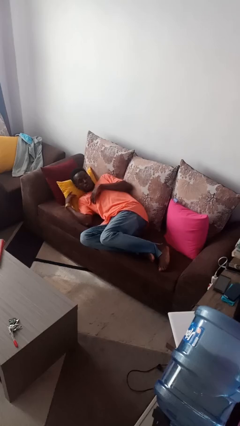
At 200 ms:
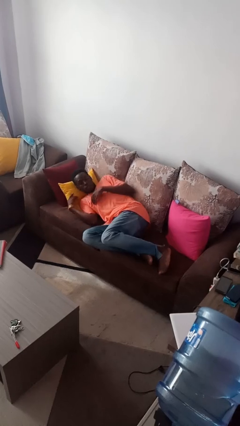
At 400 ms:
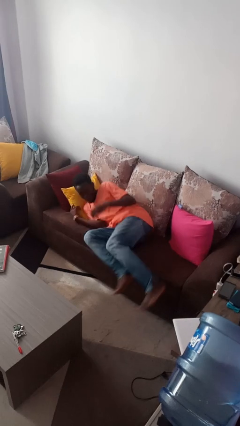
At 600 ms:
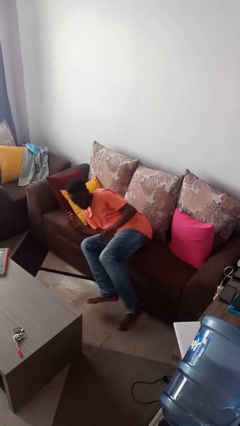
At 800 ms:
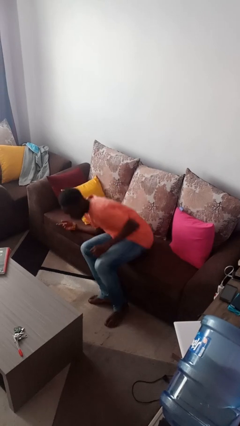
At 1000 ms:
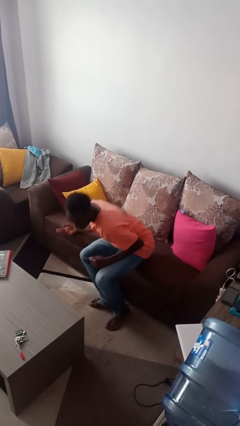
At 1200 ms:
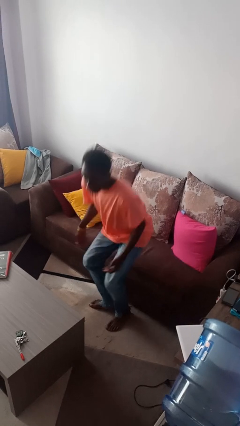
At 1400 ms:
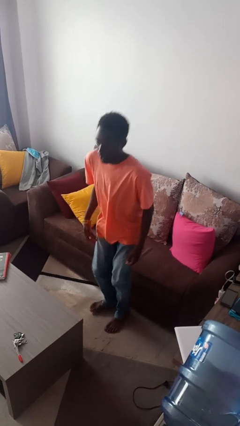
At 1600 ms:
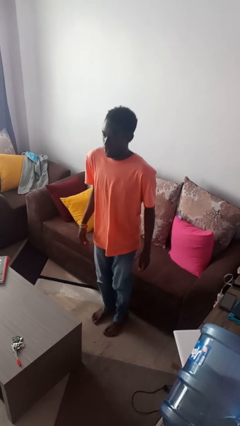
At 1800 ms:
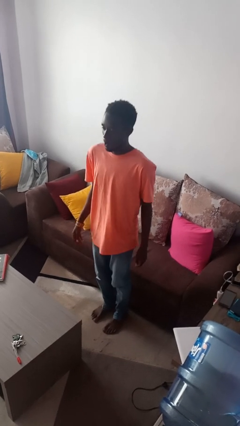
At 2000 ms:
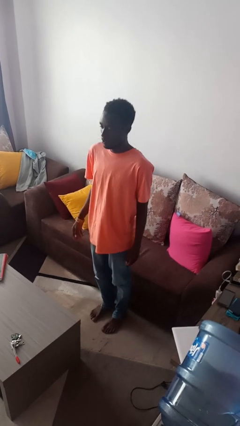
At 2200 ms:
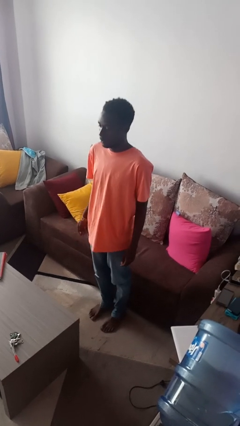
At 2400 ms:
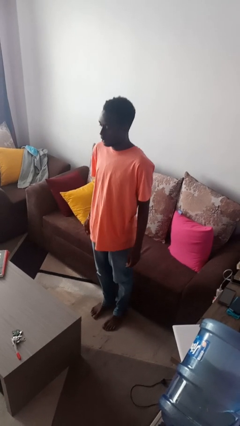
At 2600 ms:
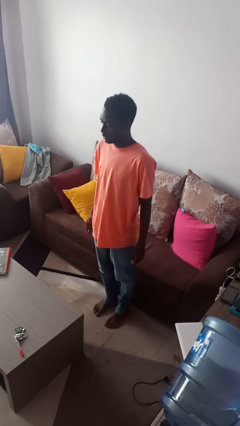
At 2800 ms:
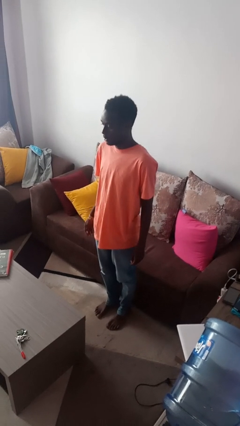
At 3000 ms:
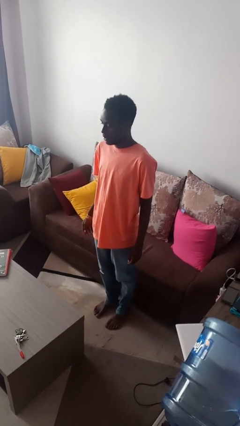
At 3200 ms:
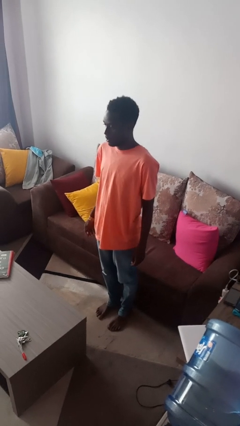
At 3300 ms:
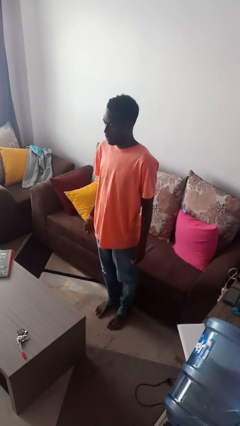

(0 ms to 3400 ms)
person stands up

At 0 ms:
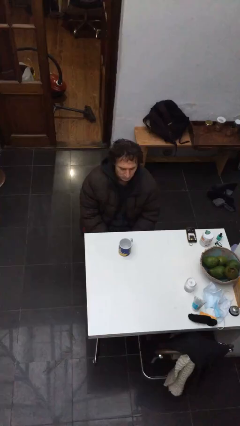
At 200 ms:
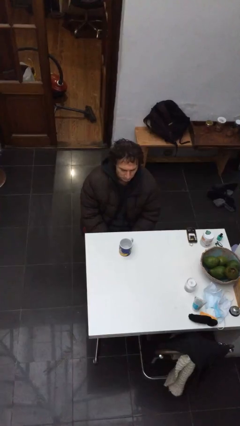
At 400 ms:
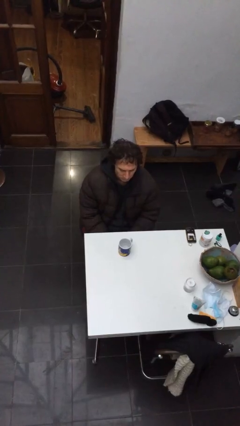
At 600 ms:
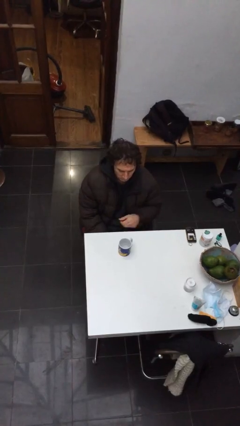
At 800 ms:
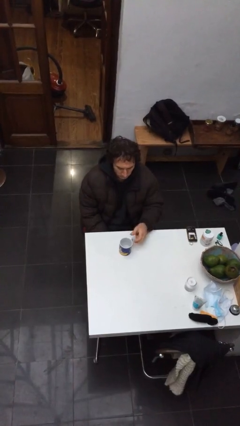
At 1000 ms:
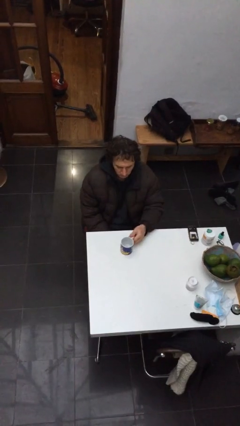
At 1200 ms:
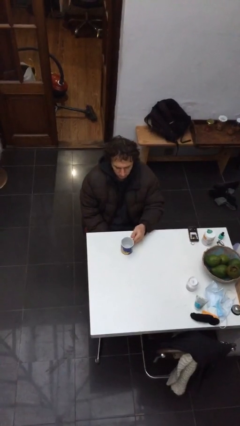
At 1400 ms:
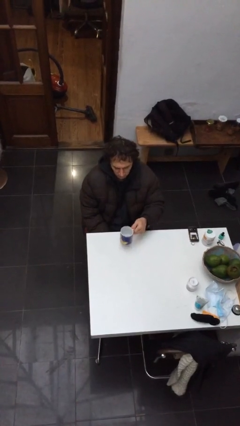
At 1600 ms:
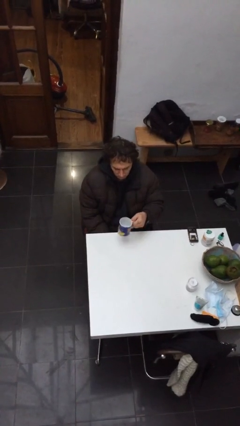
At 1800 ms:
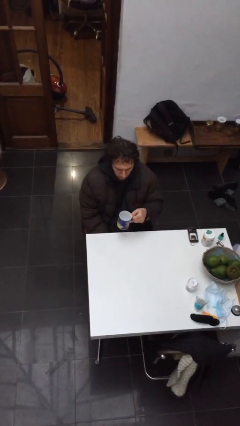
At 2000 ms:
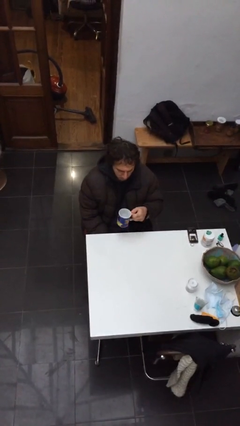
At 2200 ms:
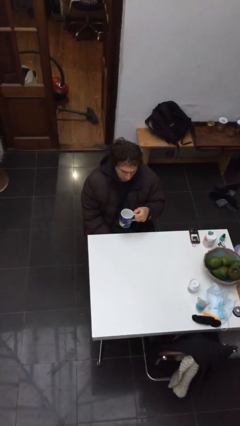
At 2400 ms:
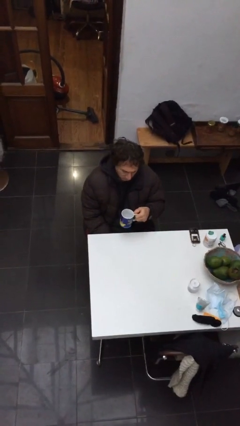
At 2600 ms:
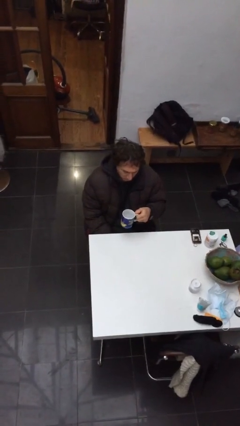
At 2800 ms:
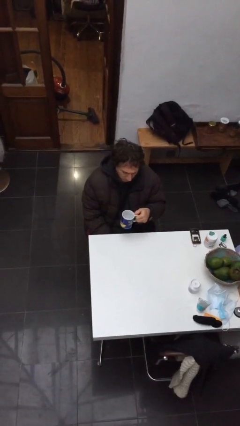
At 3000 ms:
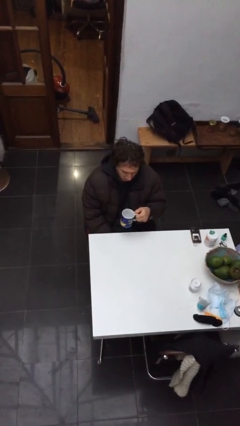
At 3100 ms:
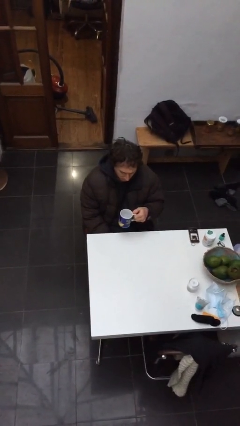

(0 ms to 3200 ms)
person picks up object from table

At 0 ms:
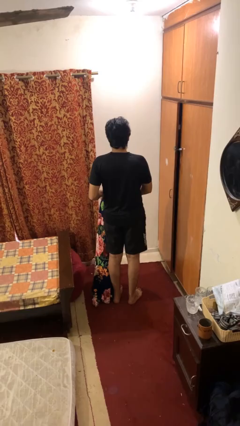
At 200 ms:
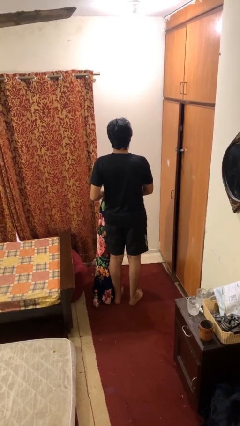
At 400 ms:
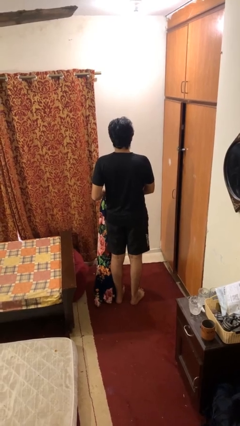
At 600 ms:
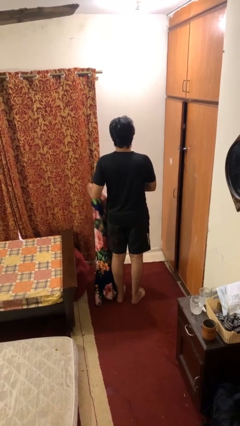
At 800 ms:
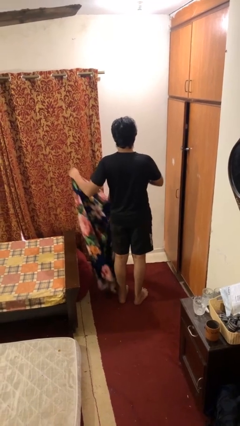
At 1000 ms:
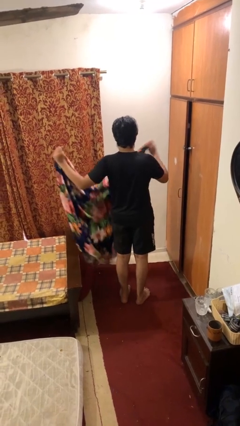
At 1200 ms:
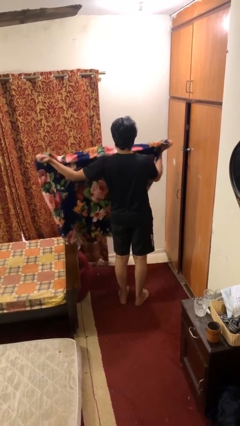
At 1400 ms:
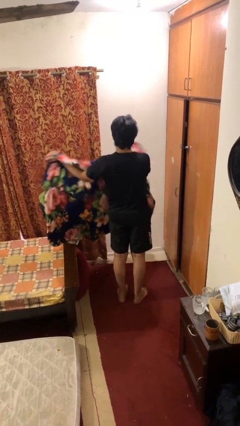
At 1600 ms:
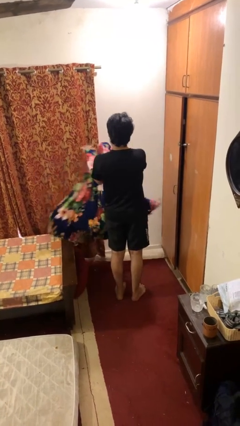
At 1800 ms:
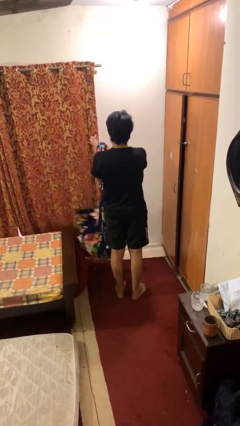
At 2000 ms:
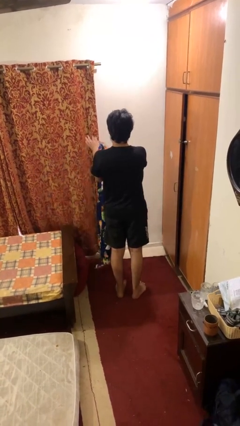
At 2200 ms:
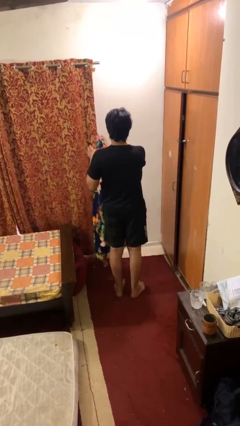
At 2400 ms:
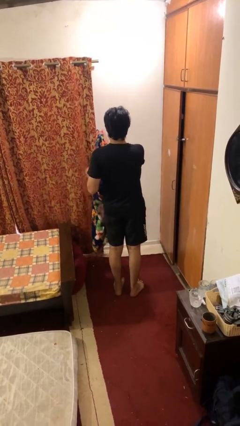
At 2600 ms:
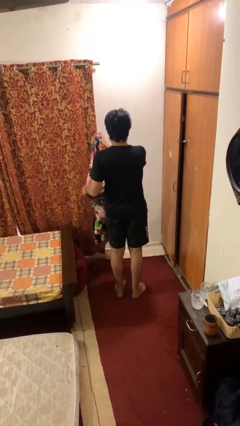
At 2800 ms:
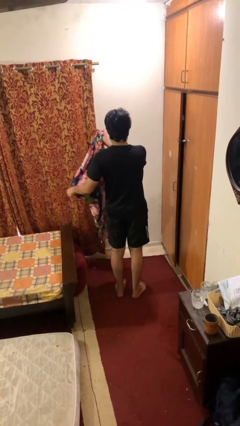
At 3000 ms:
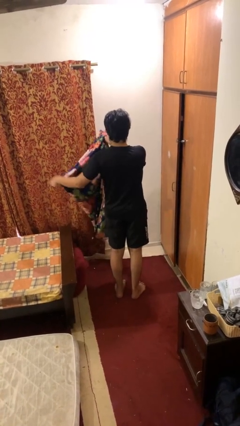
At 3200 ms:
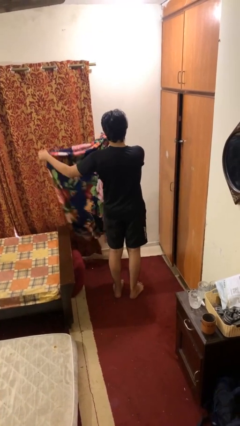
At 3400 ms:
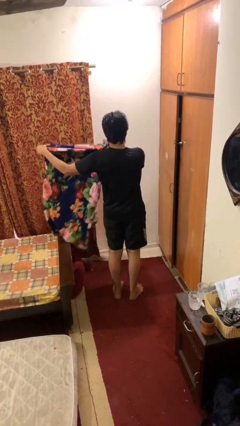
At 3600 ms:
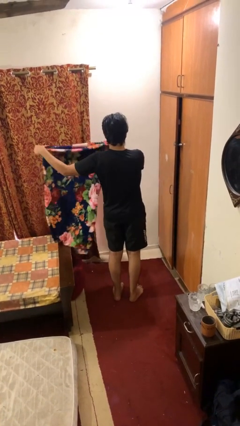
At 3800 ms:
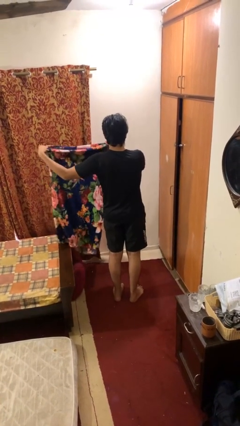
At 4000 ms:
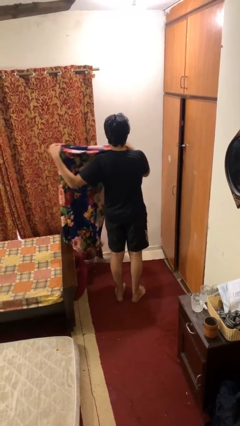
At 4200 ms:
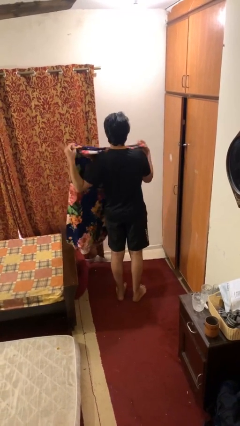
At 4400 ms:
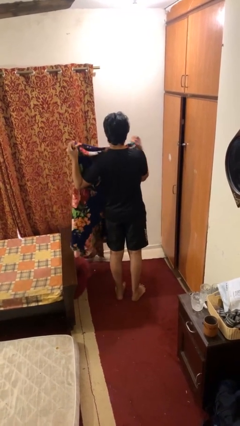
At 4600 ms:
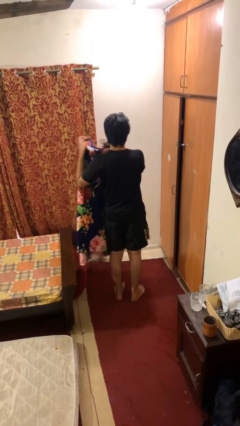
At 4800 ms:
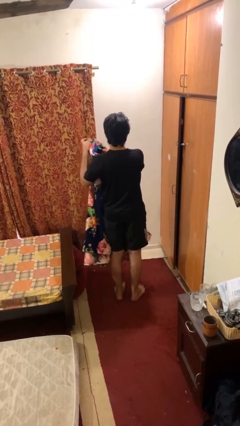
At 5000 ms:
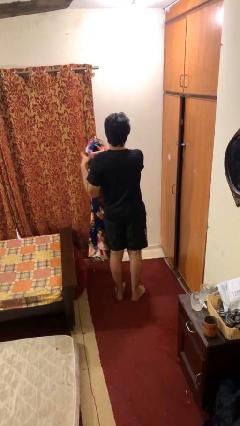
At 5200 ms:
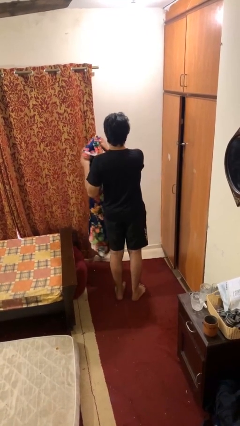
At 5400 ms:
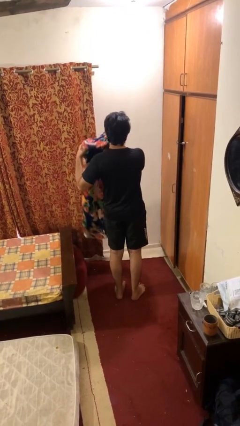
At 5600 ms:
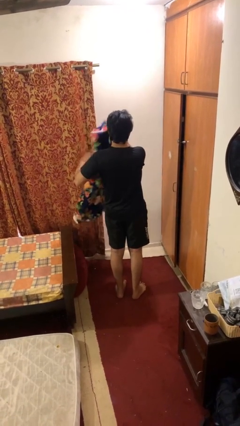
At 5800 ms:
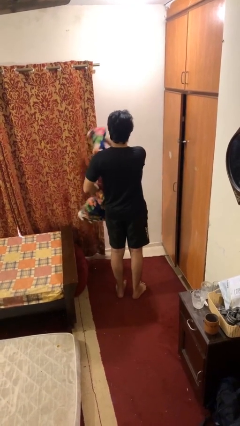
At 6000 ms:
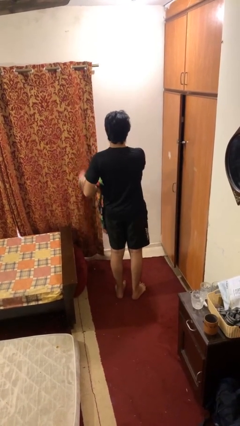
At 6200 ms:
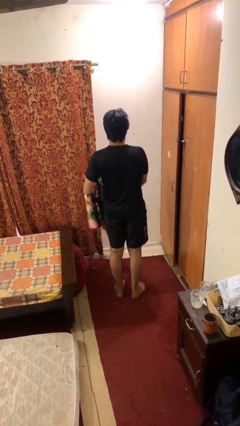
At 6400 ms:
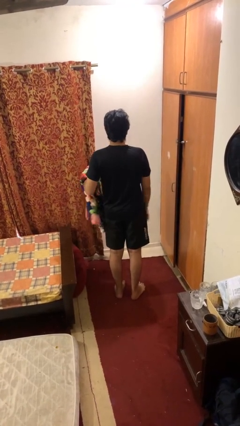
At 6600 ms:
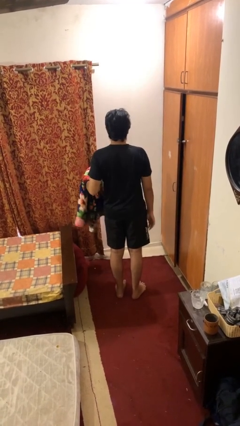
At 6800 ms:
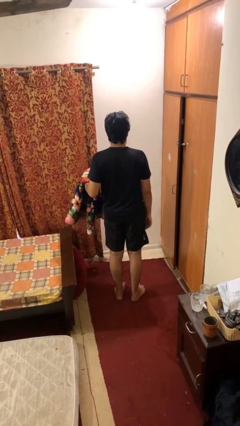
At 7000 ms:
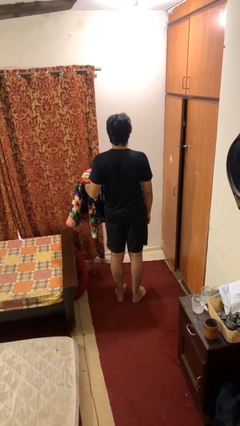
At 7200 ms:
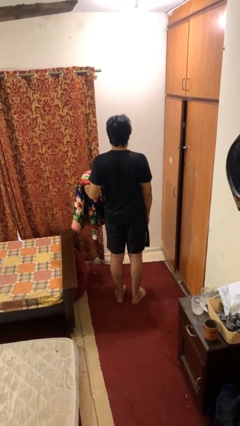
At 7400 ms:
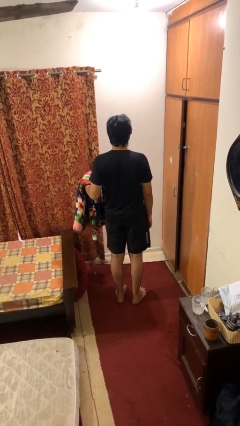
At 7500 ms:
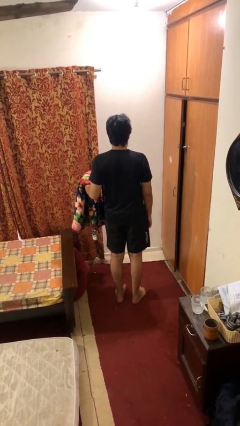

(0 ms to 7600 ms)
person folds blanket

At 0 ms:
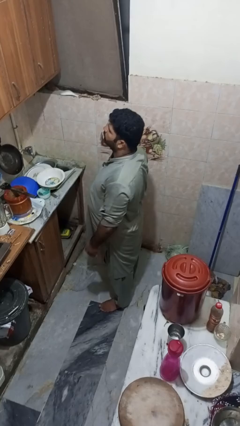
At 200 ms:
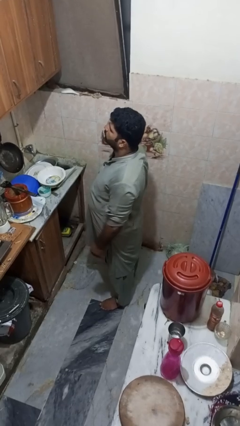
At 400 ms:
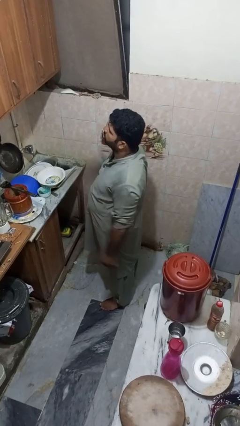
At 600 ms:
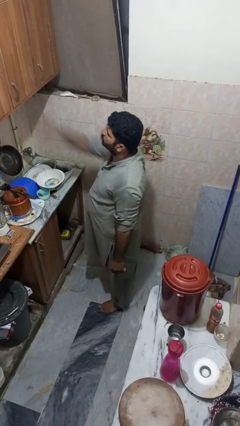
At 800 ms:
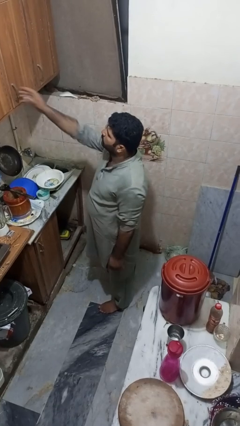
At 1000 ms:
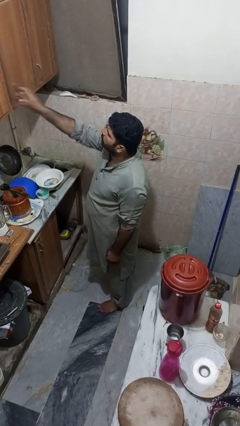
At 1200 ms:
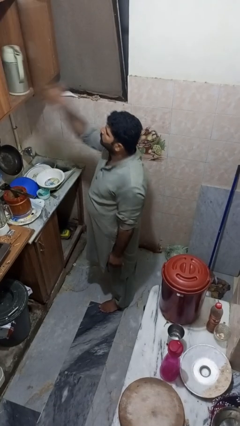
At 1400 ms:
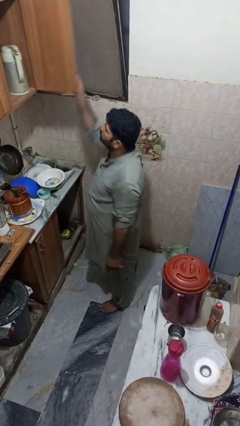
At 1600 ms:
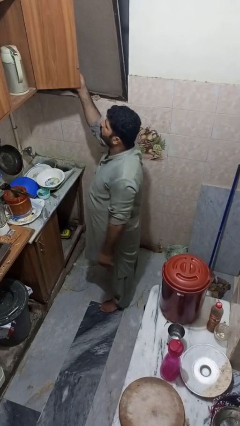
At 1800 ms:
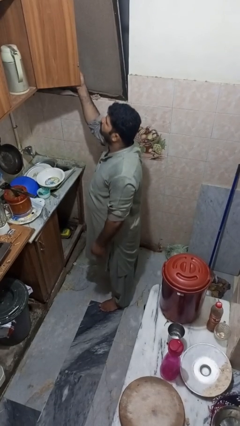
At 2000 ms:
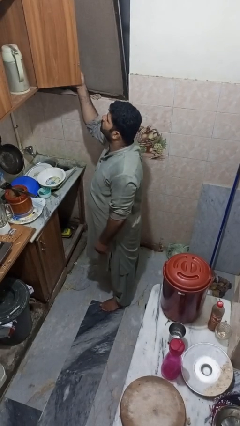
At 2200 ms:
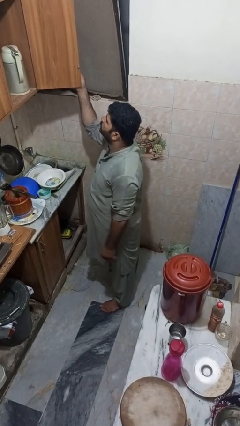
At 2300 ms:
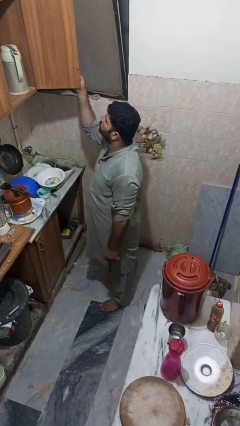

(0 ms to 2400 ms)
person opens cabinet

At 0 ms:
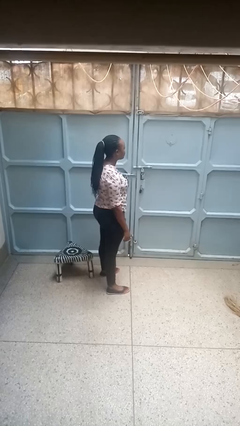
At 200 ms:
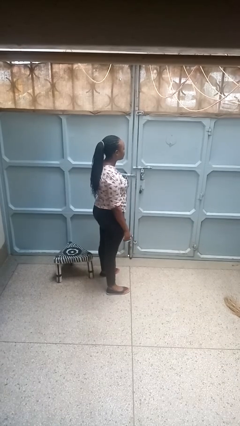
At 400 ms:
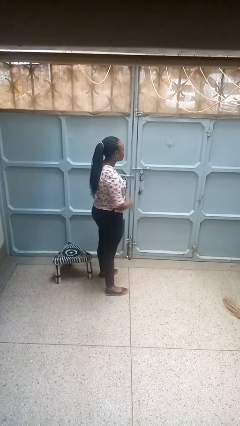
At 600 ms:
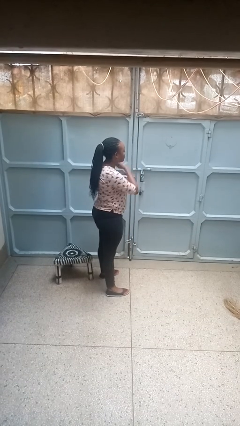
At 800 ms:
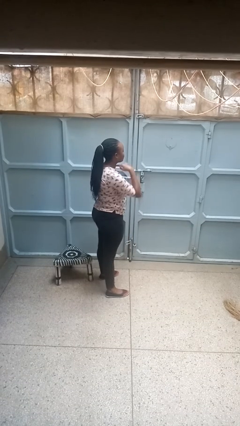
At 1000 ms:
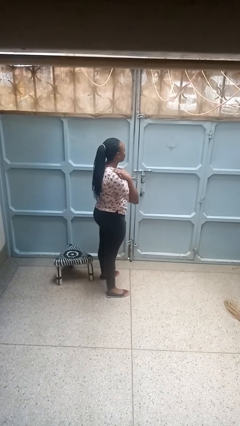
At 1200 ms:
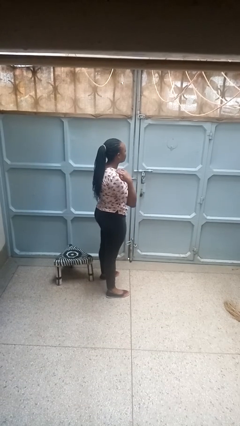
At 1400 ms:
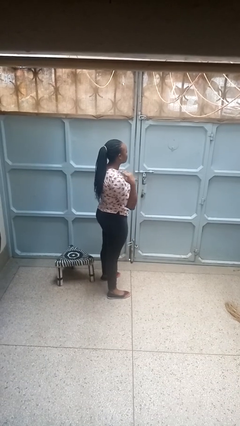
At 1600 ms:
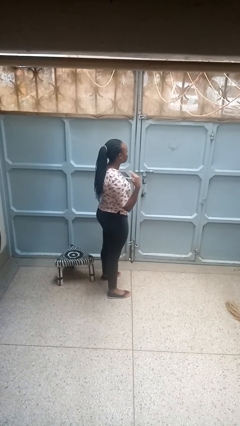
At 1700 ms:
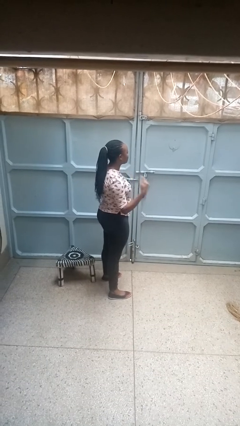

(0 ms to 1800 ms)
person gestures cut
